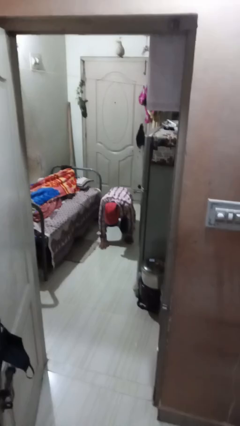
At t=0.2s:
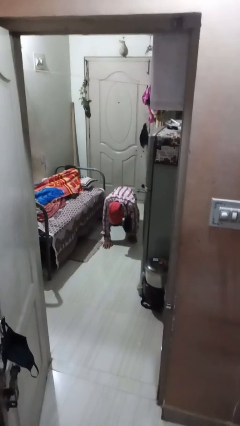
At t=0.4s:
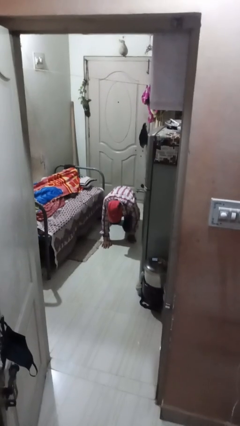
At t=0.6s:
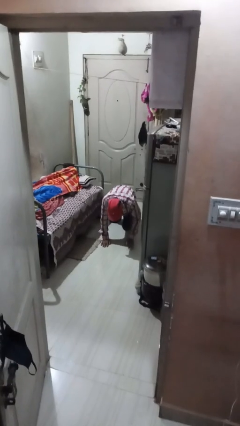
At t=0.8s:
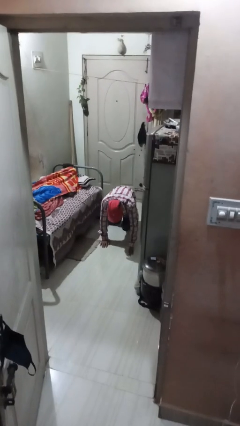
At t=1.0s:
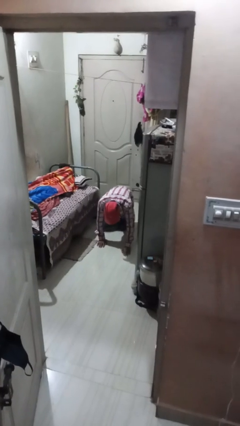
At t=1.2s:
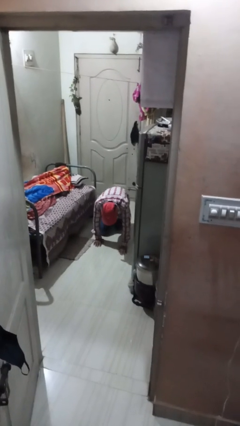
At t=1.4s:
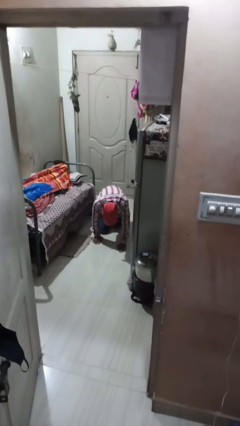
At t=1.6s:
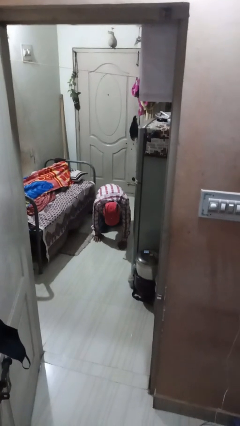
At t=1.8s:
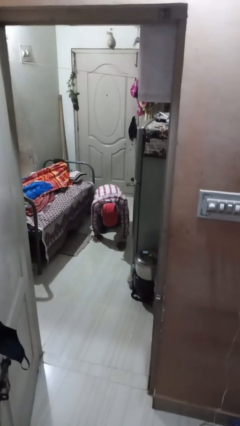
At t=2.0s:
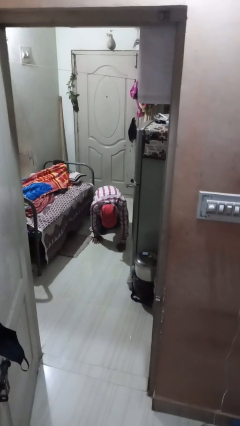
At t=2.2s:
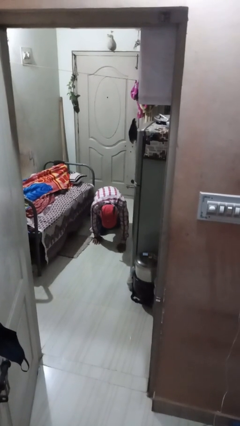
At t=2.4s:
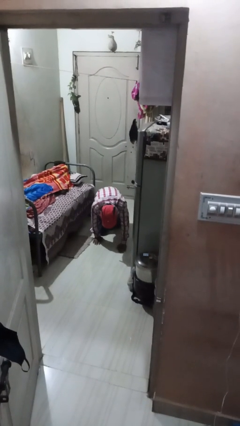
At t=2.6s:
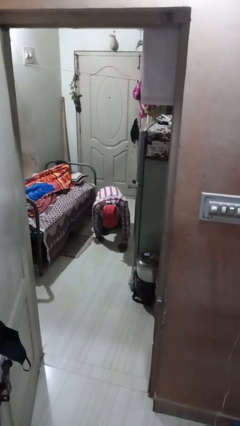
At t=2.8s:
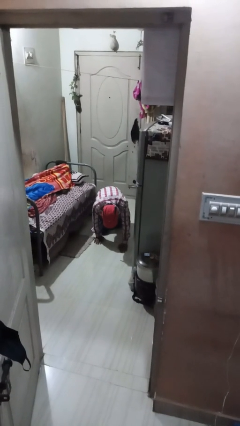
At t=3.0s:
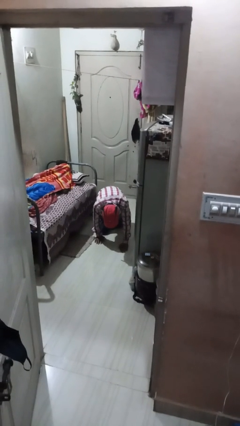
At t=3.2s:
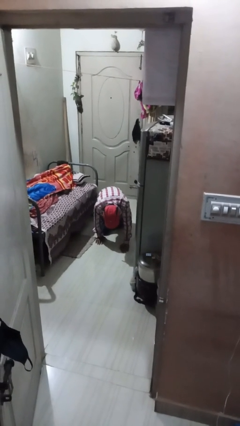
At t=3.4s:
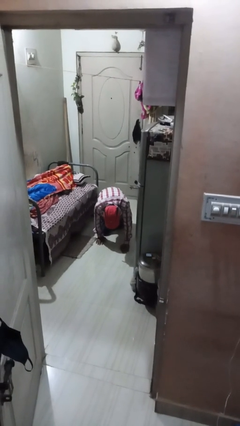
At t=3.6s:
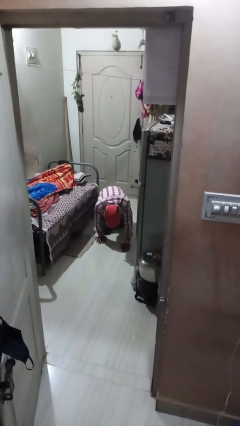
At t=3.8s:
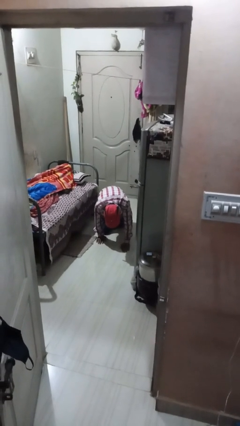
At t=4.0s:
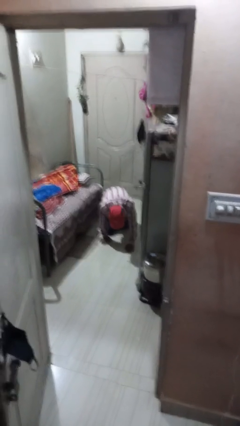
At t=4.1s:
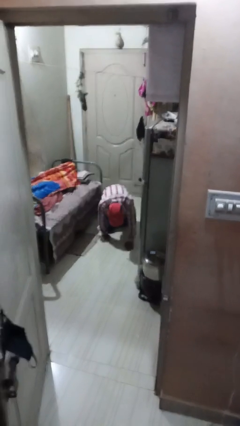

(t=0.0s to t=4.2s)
person crawls

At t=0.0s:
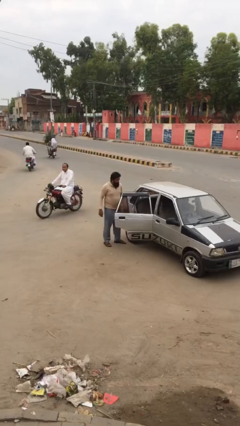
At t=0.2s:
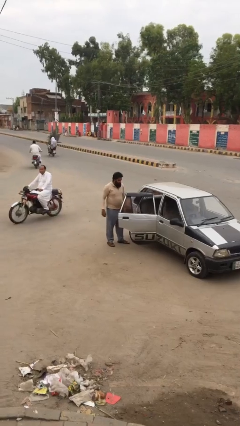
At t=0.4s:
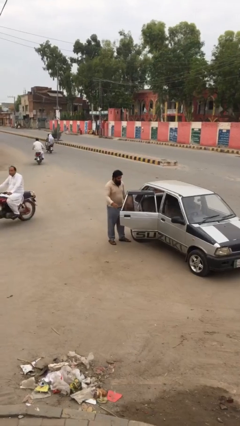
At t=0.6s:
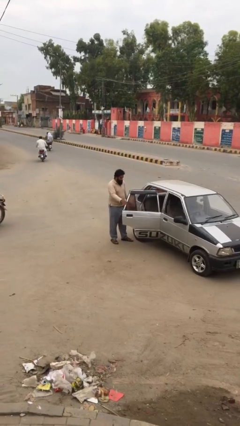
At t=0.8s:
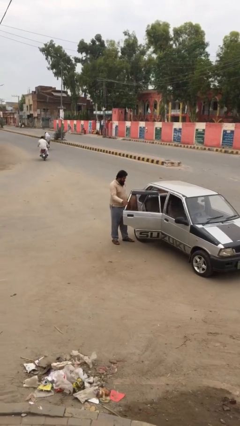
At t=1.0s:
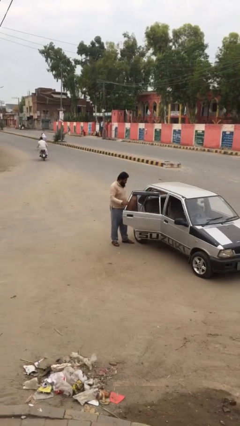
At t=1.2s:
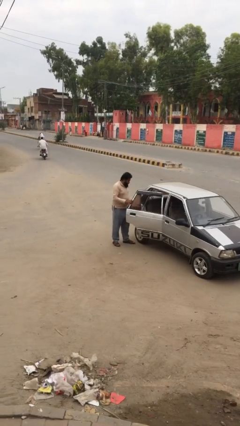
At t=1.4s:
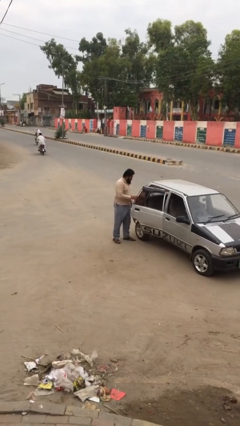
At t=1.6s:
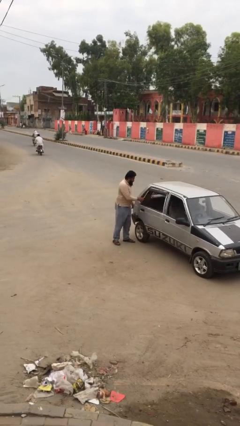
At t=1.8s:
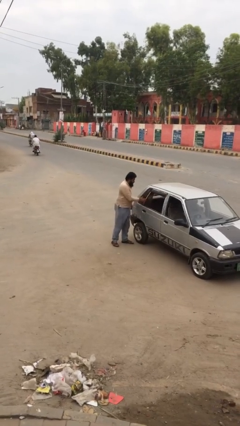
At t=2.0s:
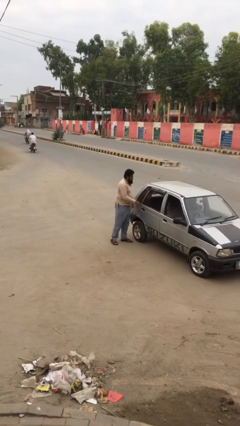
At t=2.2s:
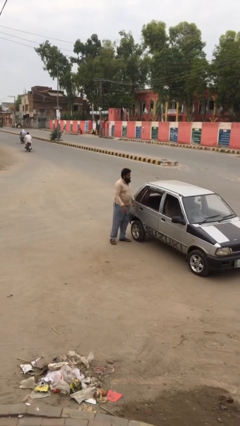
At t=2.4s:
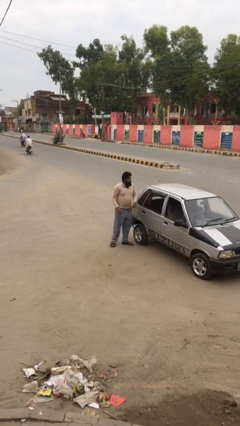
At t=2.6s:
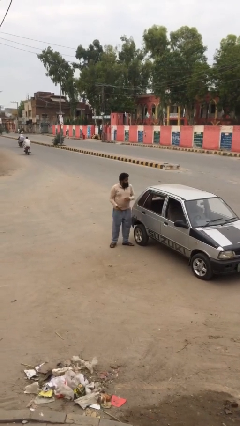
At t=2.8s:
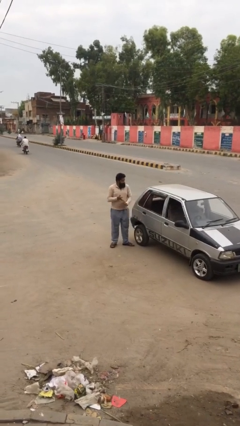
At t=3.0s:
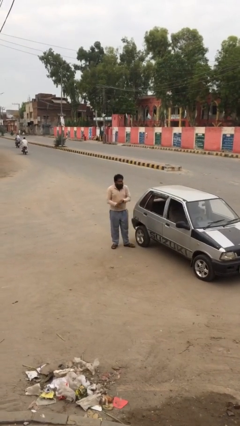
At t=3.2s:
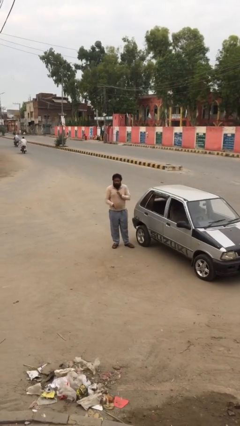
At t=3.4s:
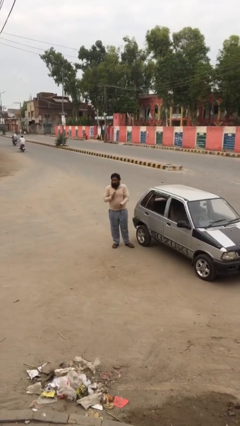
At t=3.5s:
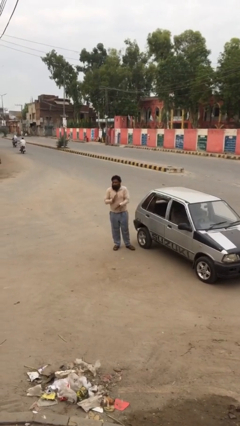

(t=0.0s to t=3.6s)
person closes car door

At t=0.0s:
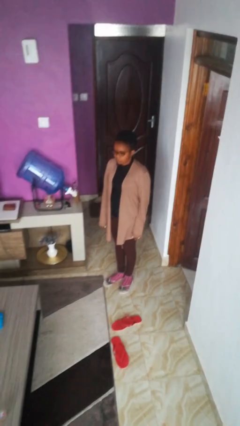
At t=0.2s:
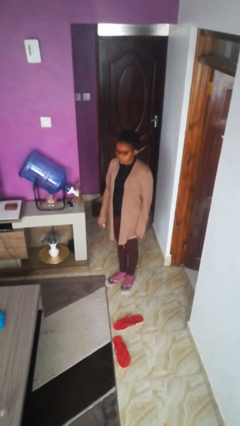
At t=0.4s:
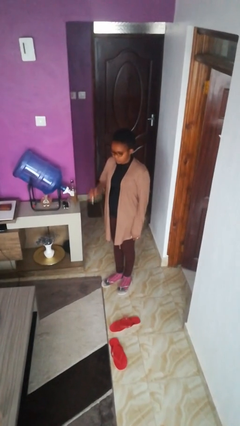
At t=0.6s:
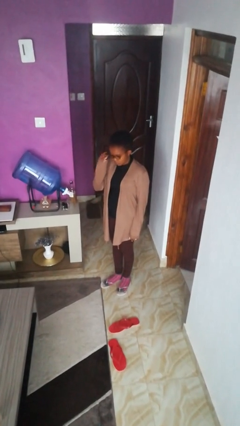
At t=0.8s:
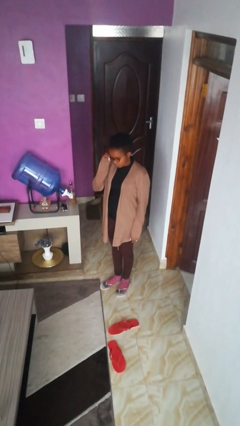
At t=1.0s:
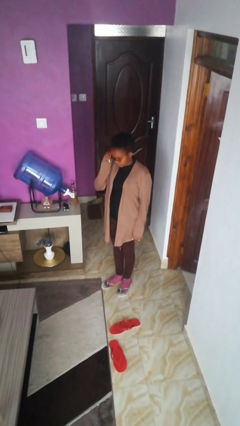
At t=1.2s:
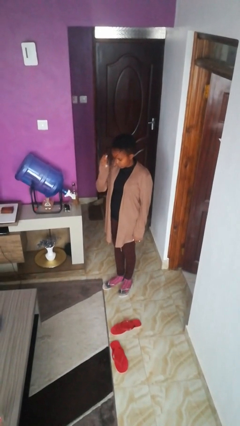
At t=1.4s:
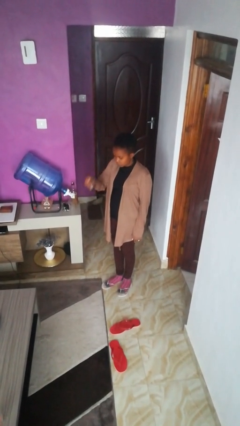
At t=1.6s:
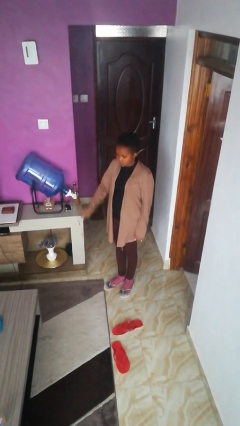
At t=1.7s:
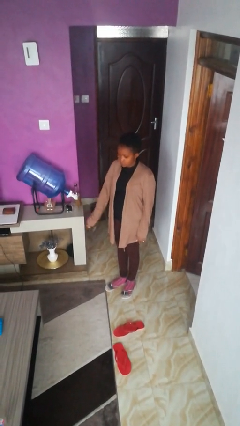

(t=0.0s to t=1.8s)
person takes off glasses

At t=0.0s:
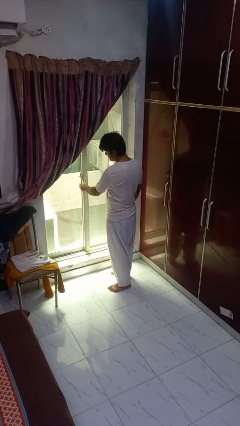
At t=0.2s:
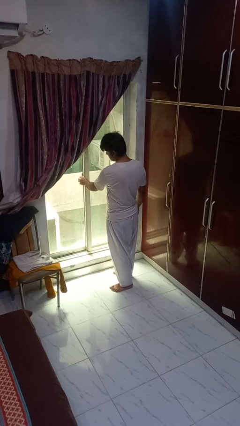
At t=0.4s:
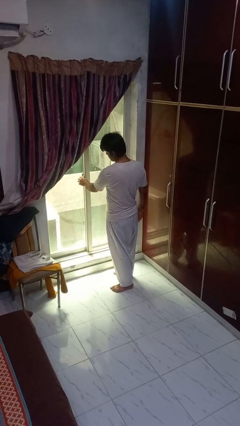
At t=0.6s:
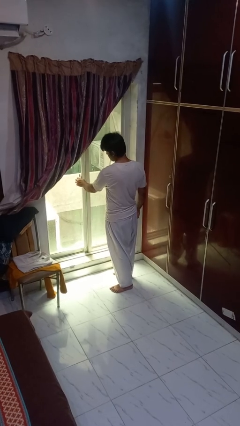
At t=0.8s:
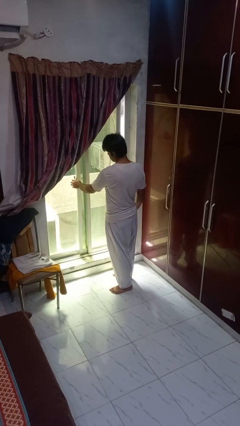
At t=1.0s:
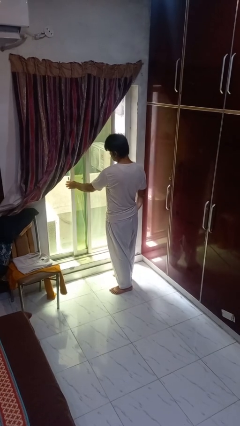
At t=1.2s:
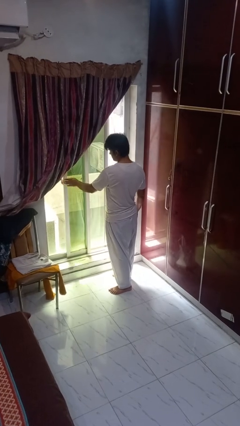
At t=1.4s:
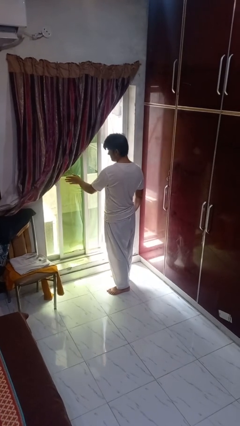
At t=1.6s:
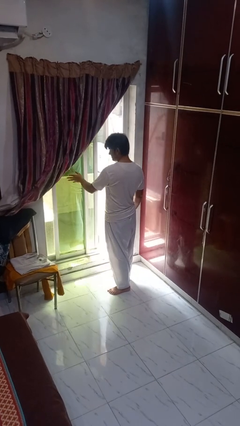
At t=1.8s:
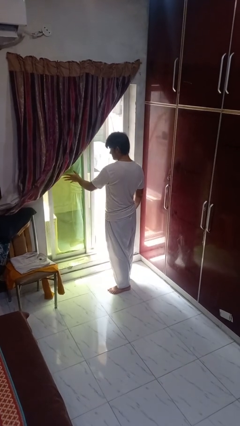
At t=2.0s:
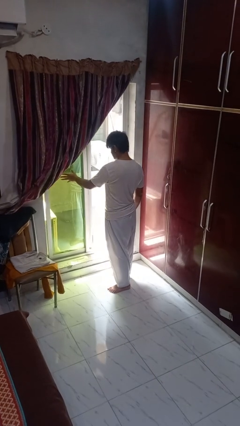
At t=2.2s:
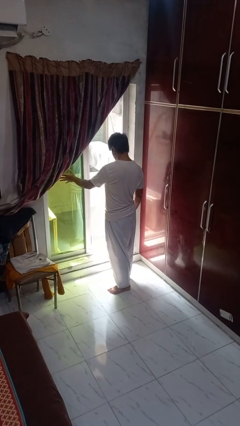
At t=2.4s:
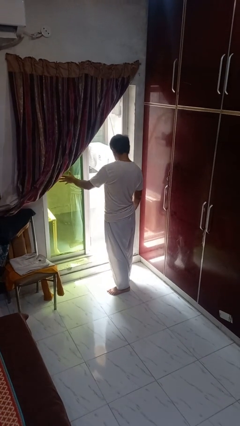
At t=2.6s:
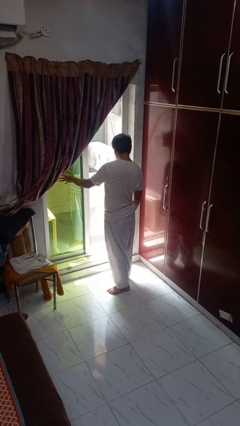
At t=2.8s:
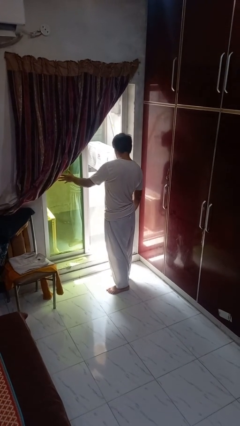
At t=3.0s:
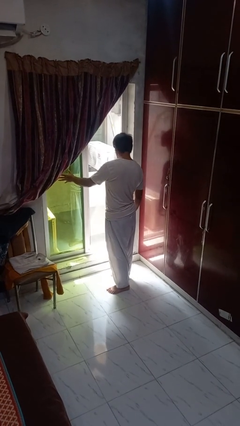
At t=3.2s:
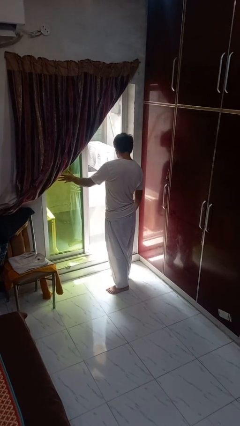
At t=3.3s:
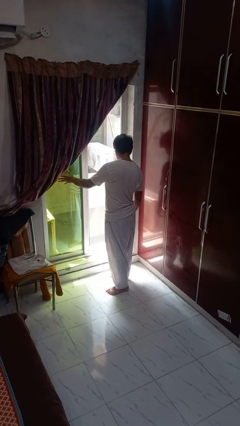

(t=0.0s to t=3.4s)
person opens home window

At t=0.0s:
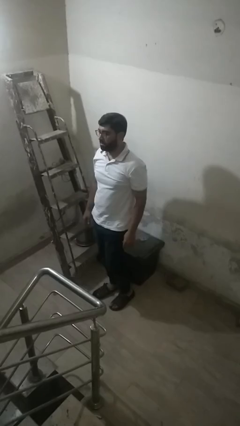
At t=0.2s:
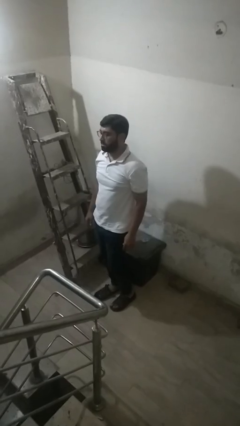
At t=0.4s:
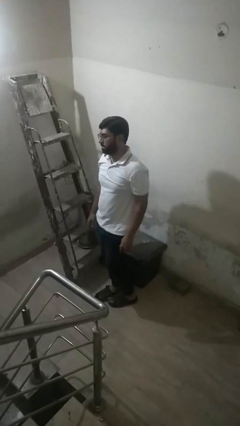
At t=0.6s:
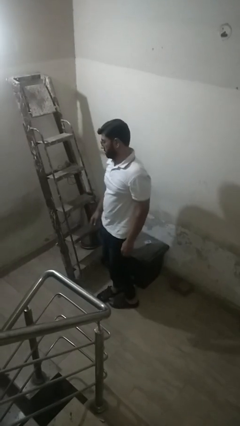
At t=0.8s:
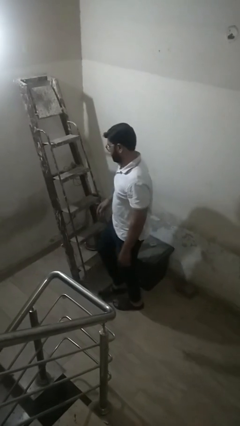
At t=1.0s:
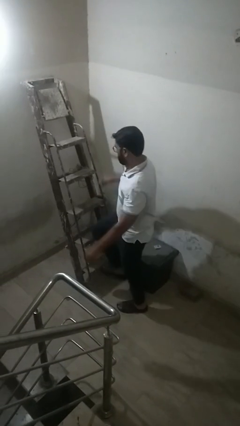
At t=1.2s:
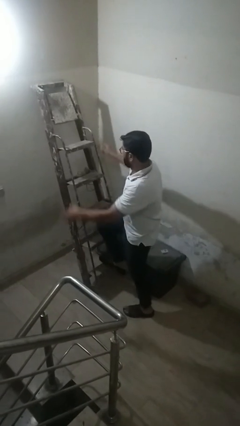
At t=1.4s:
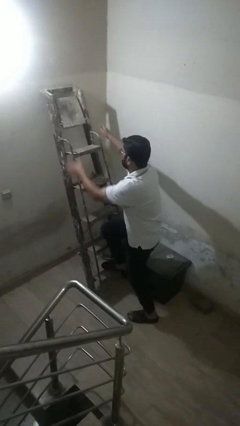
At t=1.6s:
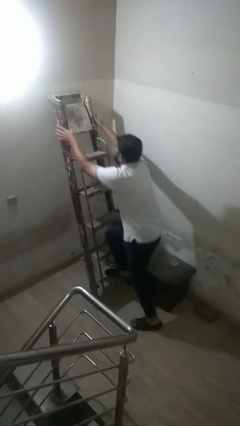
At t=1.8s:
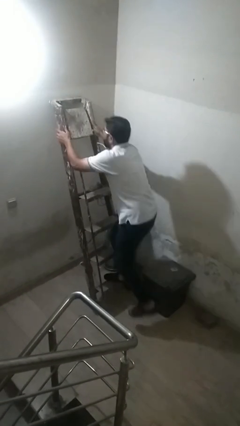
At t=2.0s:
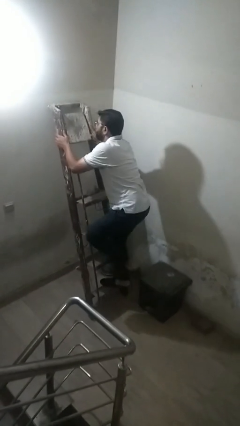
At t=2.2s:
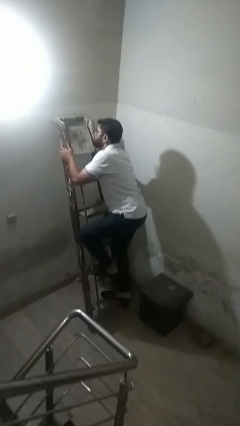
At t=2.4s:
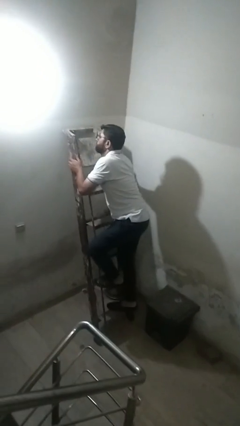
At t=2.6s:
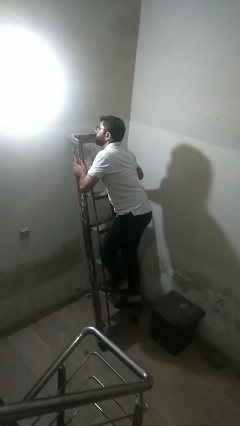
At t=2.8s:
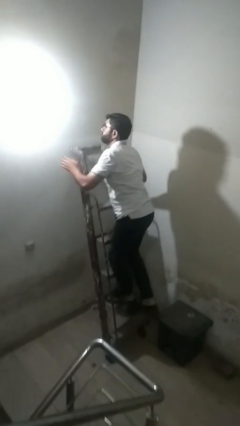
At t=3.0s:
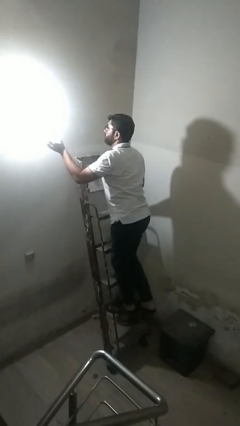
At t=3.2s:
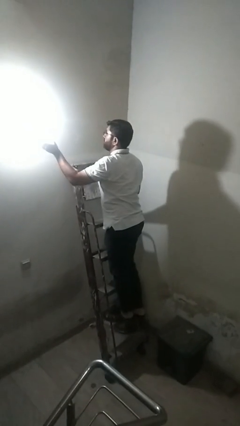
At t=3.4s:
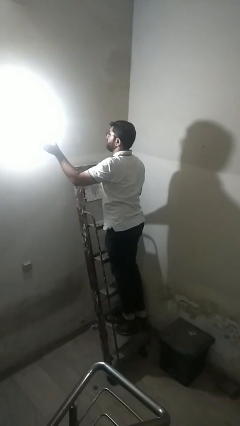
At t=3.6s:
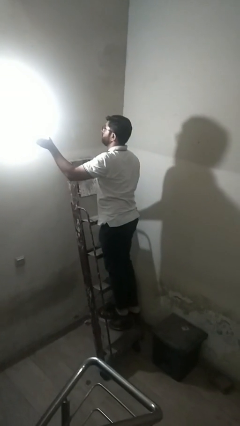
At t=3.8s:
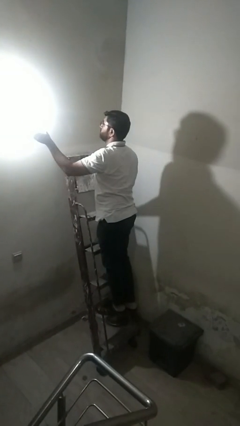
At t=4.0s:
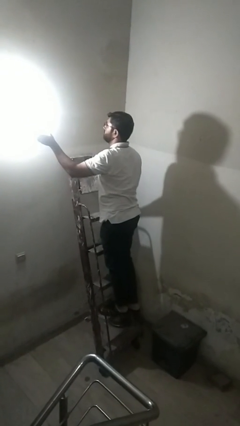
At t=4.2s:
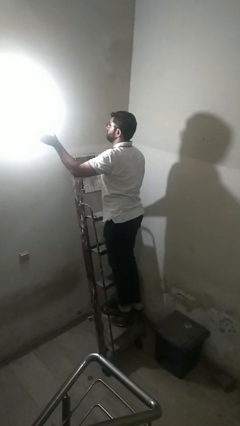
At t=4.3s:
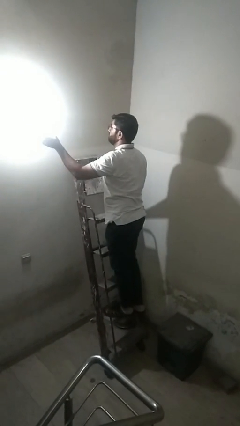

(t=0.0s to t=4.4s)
person climbs up ladder
